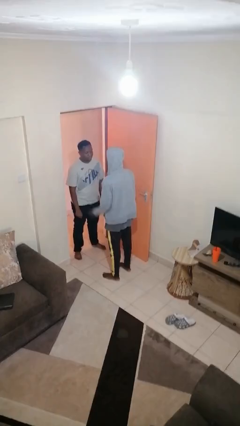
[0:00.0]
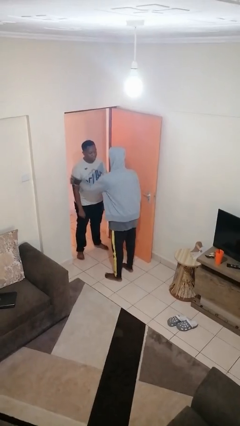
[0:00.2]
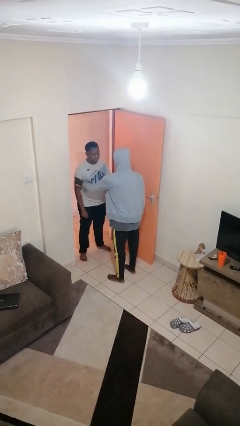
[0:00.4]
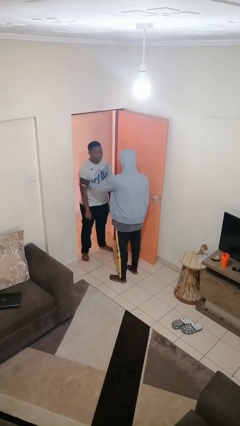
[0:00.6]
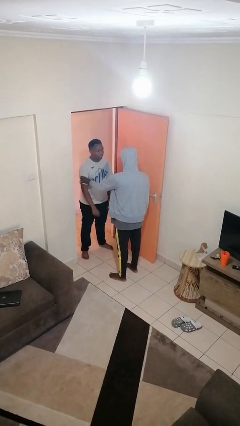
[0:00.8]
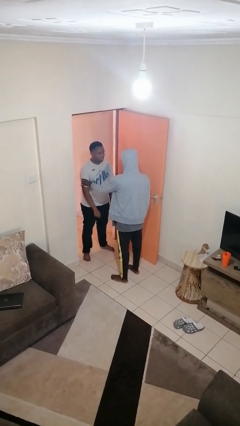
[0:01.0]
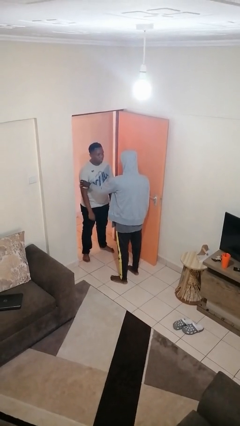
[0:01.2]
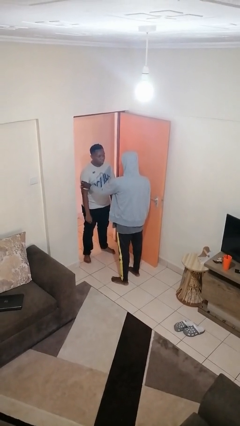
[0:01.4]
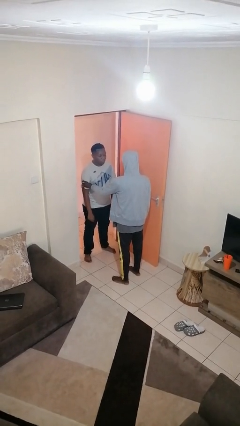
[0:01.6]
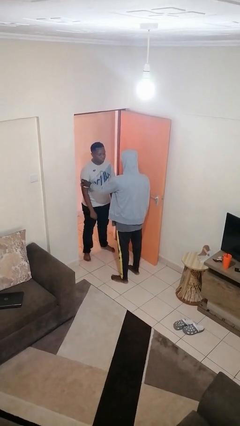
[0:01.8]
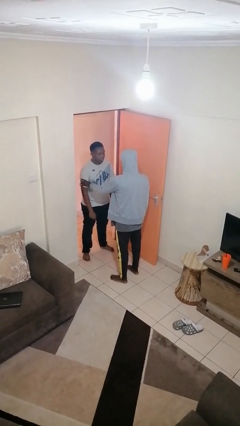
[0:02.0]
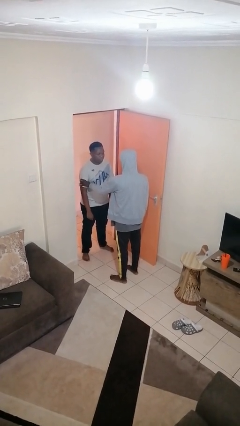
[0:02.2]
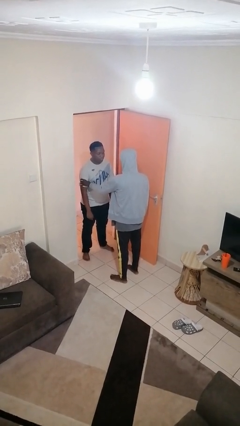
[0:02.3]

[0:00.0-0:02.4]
person grabs person by bicep

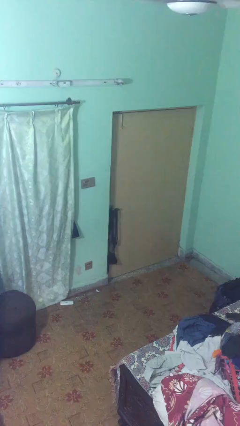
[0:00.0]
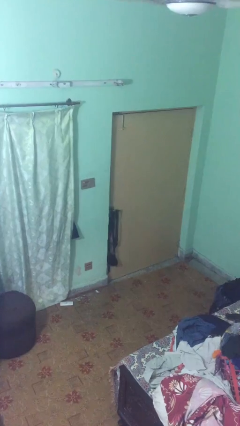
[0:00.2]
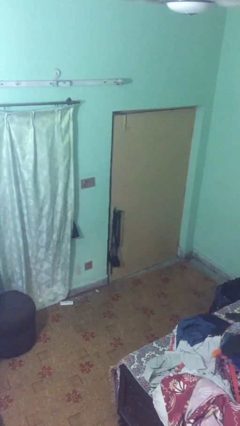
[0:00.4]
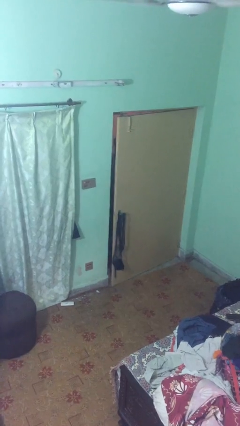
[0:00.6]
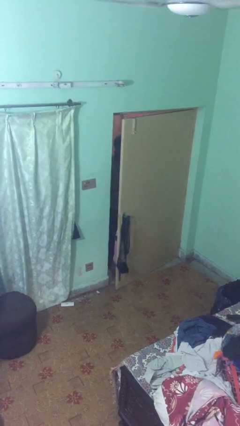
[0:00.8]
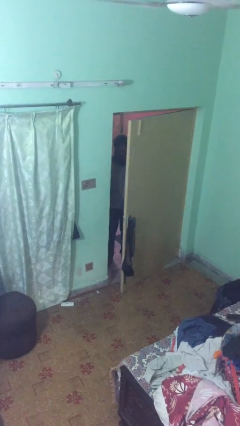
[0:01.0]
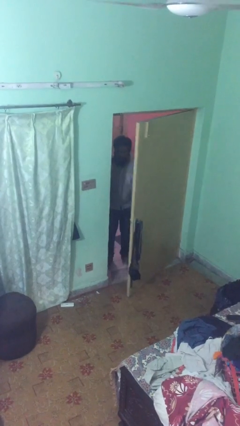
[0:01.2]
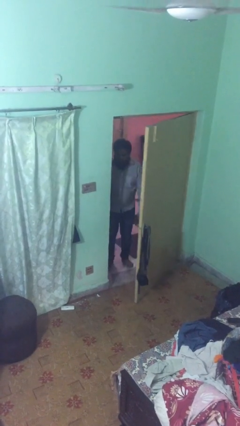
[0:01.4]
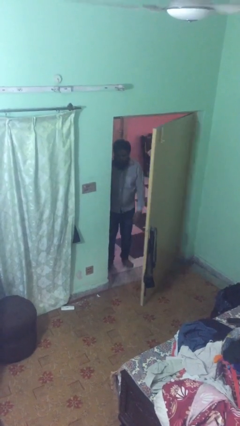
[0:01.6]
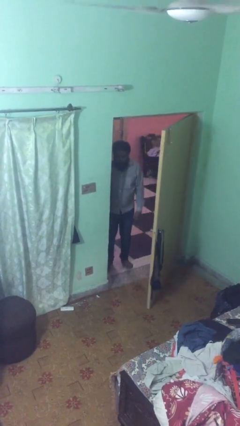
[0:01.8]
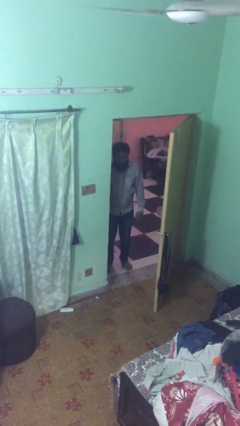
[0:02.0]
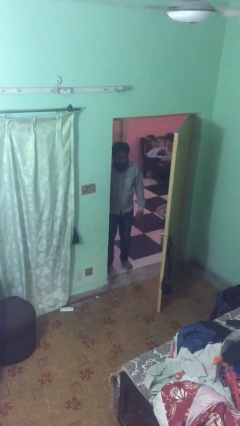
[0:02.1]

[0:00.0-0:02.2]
person opens facility door

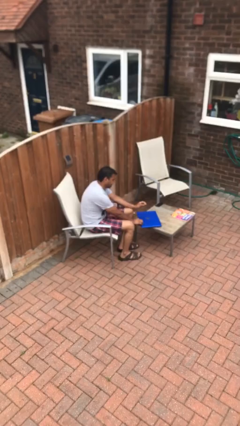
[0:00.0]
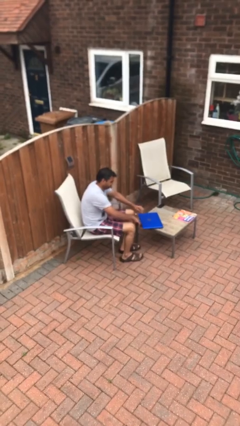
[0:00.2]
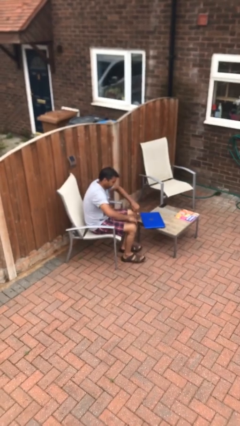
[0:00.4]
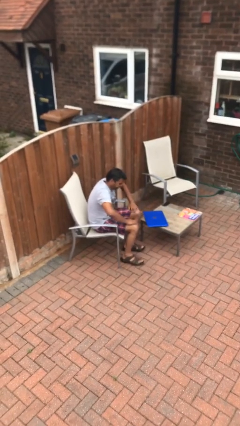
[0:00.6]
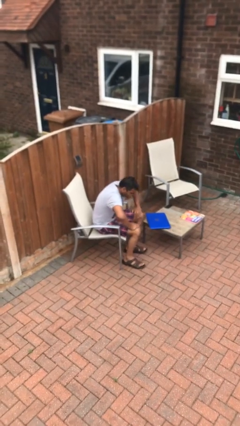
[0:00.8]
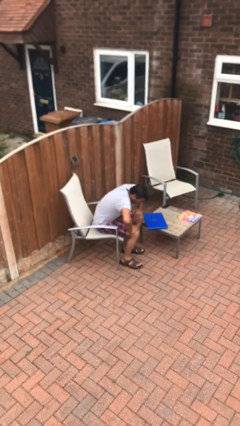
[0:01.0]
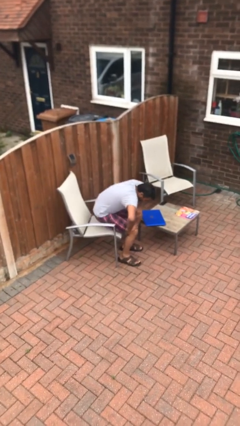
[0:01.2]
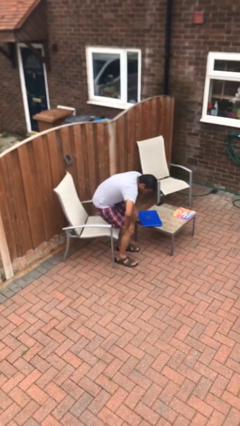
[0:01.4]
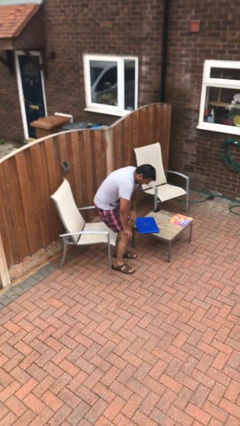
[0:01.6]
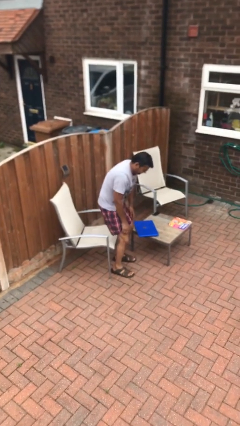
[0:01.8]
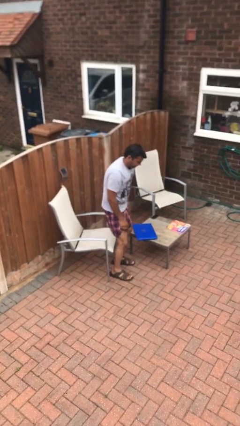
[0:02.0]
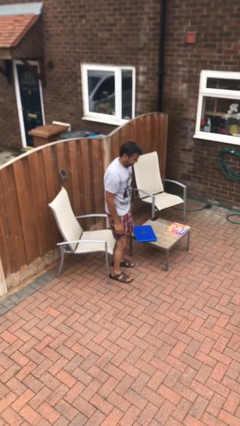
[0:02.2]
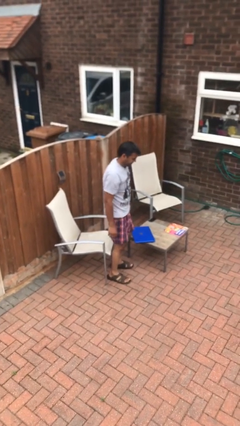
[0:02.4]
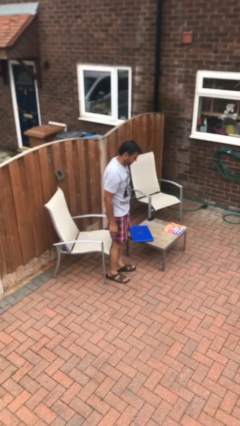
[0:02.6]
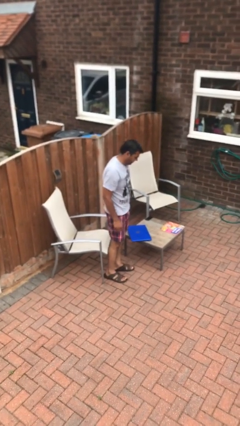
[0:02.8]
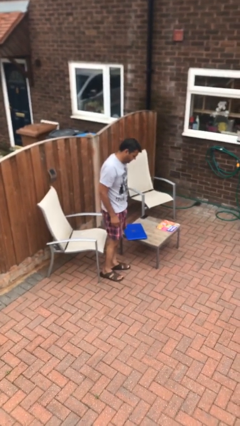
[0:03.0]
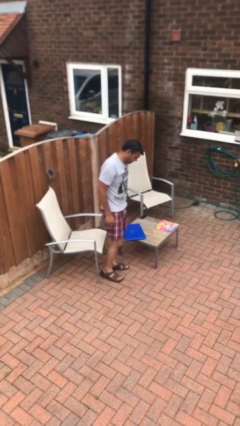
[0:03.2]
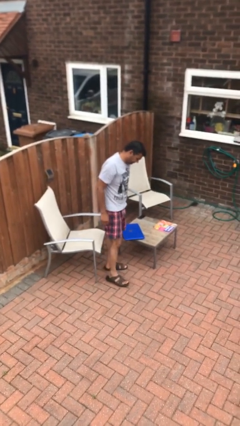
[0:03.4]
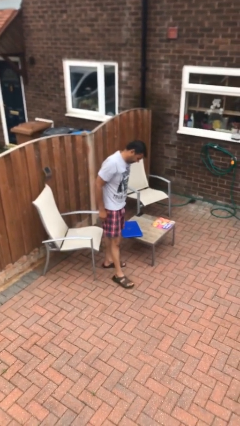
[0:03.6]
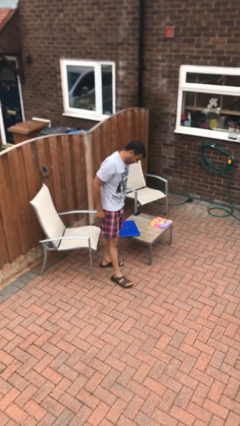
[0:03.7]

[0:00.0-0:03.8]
person stands up

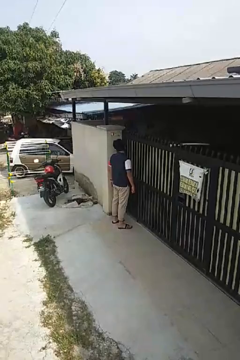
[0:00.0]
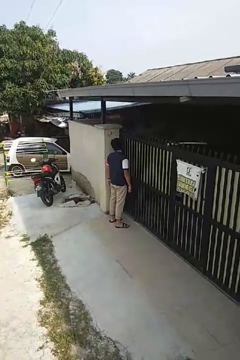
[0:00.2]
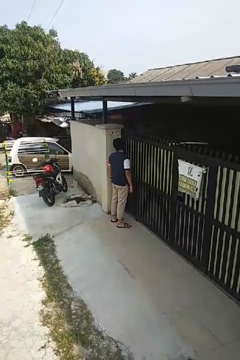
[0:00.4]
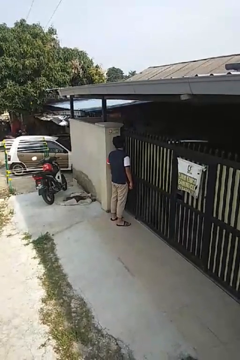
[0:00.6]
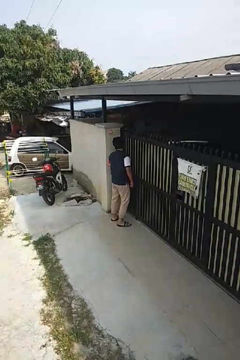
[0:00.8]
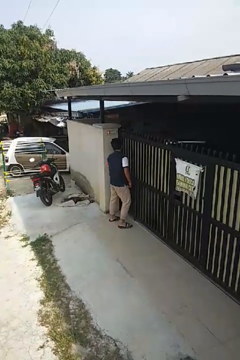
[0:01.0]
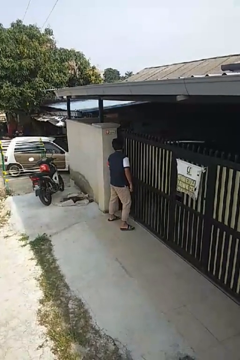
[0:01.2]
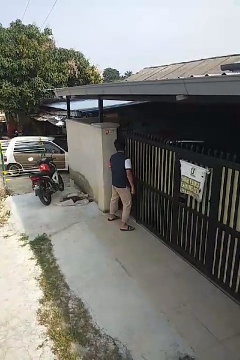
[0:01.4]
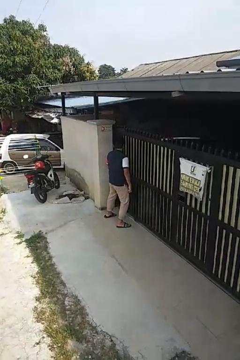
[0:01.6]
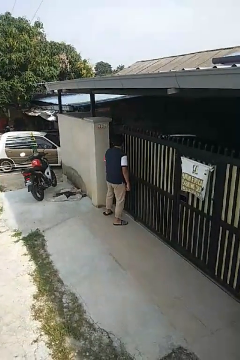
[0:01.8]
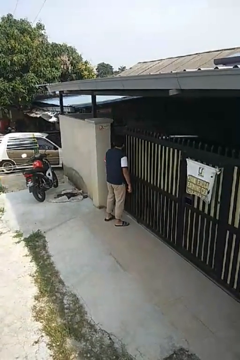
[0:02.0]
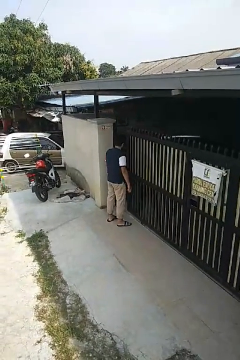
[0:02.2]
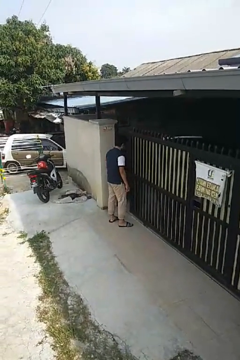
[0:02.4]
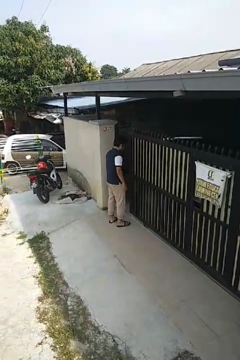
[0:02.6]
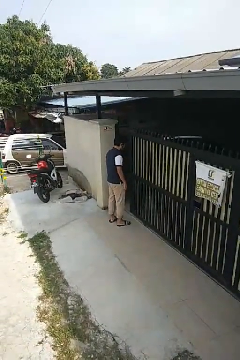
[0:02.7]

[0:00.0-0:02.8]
person opens sliding door

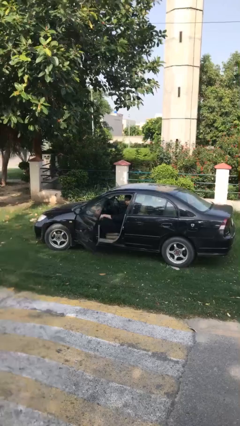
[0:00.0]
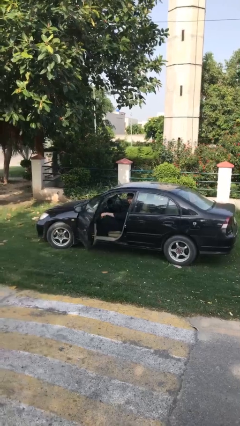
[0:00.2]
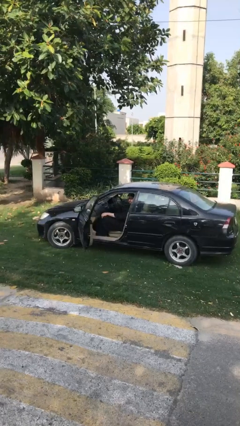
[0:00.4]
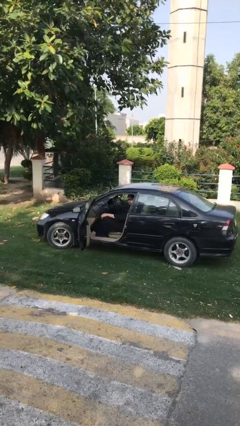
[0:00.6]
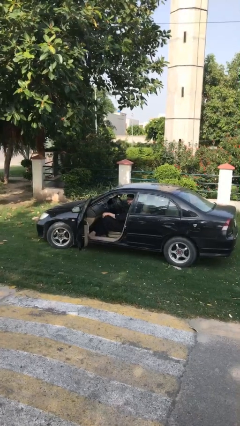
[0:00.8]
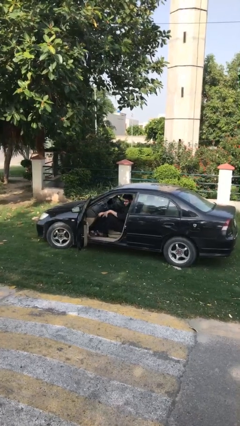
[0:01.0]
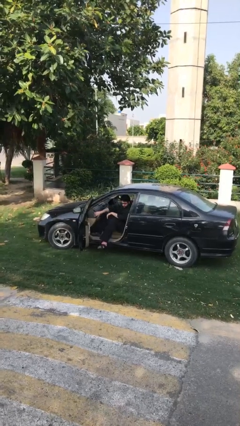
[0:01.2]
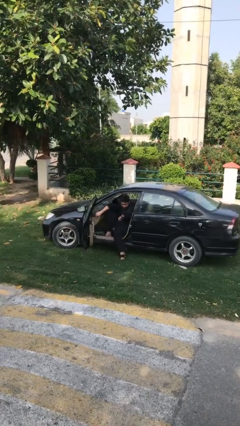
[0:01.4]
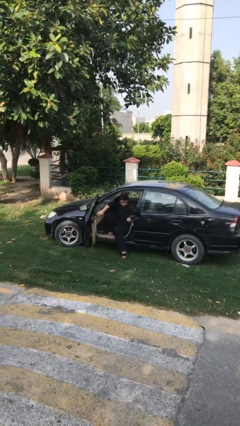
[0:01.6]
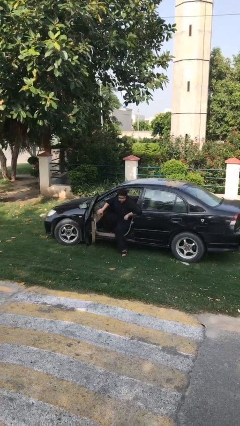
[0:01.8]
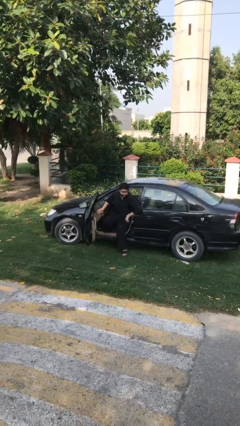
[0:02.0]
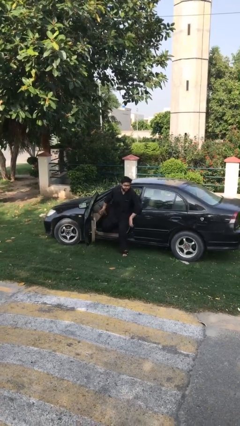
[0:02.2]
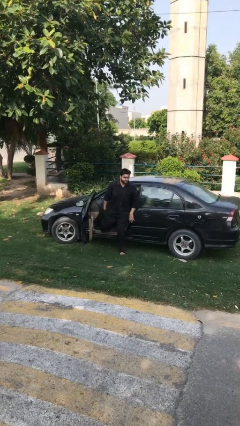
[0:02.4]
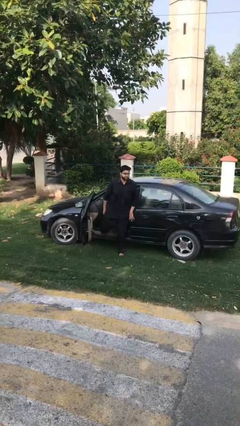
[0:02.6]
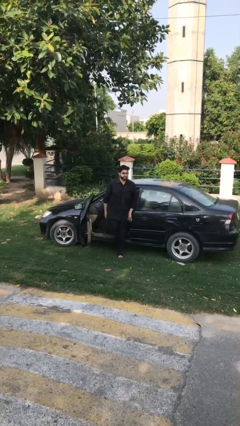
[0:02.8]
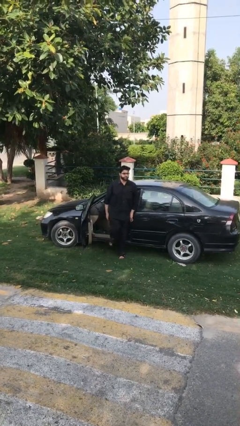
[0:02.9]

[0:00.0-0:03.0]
person exits car

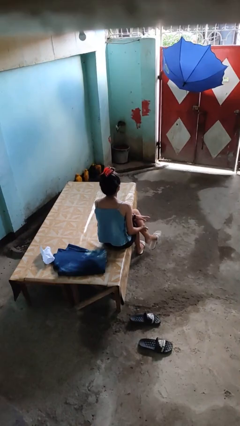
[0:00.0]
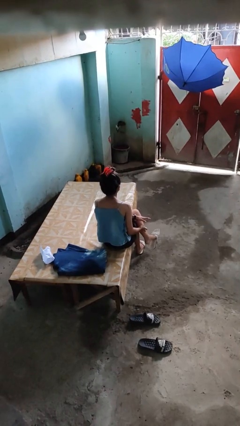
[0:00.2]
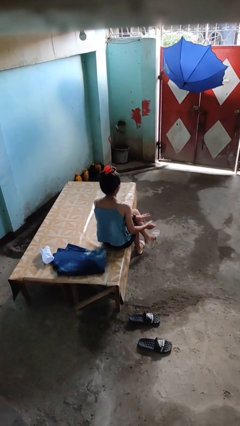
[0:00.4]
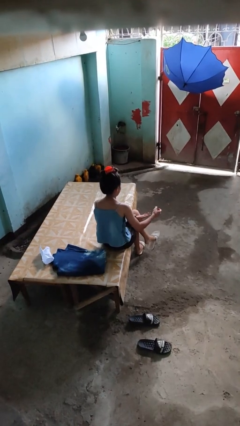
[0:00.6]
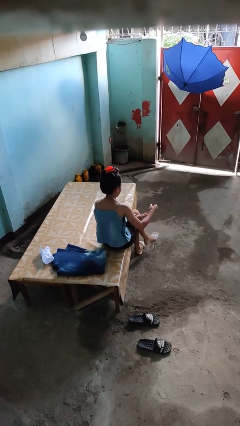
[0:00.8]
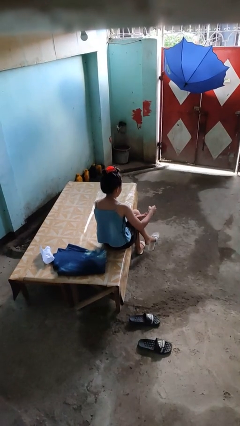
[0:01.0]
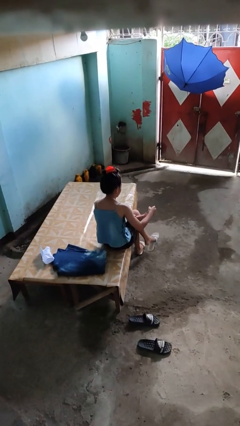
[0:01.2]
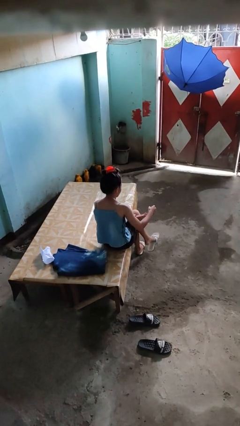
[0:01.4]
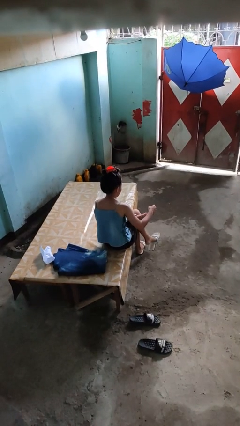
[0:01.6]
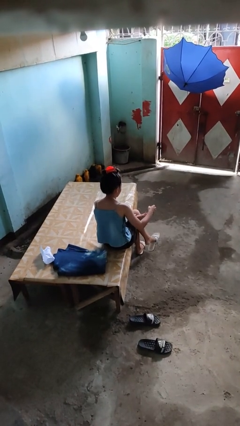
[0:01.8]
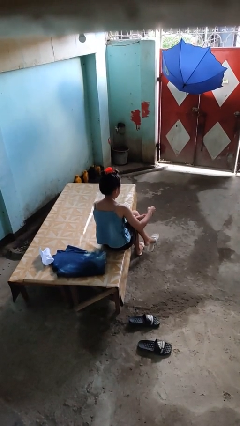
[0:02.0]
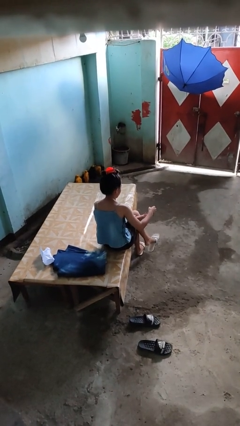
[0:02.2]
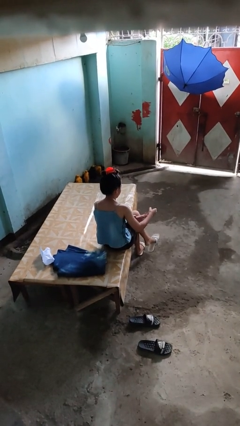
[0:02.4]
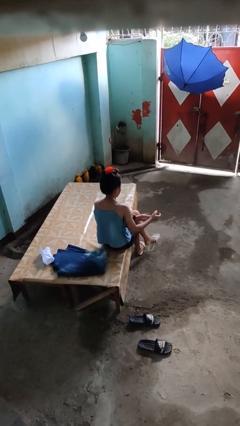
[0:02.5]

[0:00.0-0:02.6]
person clips fingernails

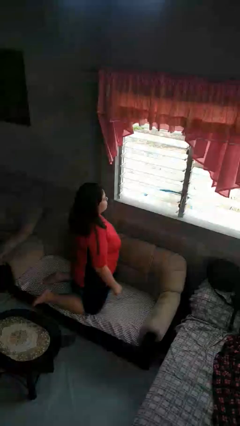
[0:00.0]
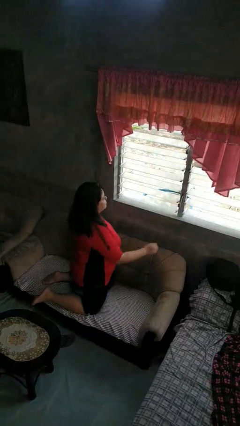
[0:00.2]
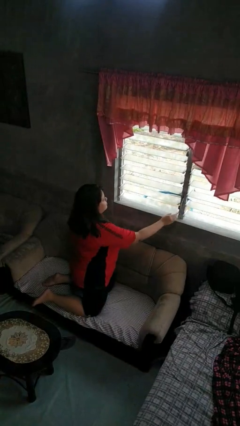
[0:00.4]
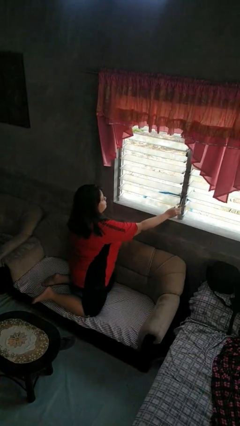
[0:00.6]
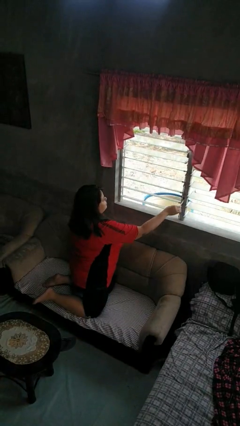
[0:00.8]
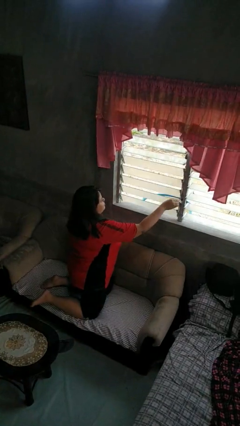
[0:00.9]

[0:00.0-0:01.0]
person closes home window
